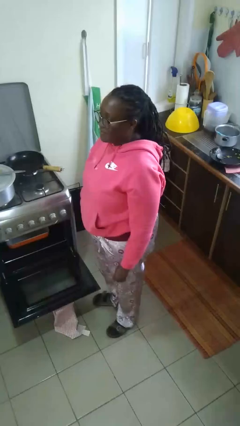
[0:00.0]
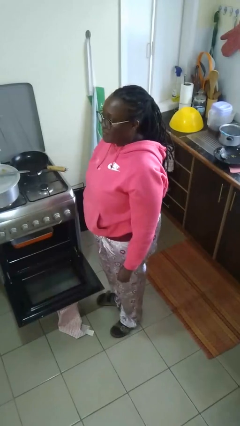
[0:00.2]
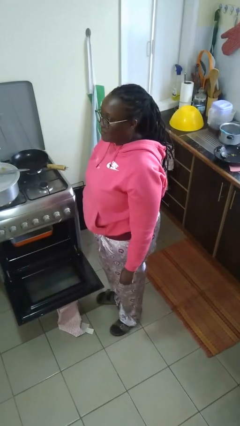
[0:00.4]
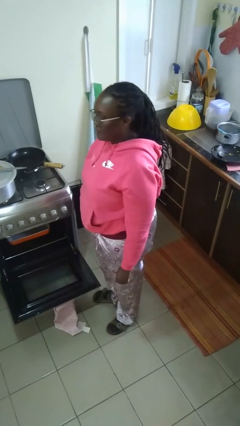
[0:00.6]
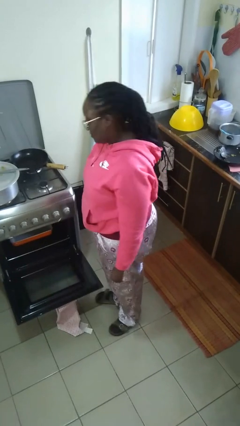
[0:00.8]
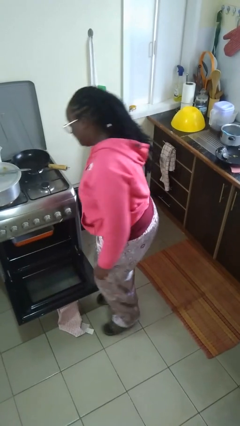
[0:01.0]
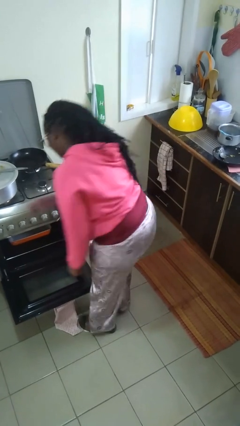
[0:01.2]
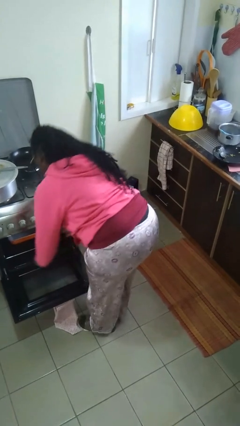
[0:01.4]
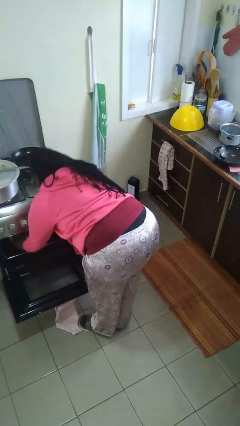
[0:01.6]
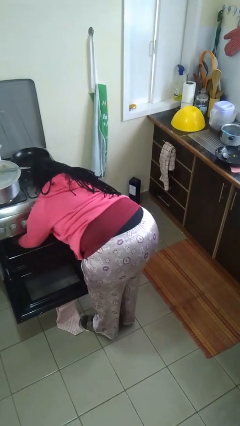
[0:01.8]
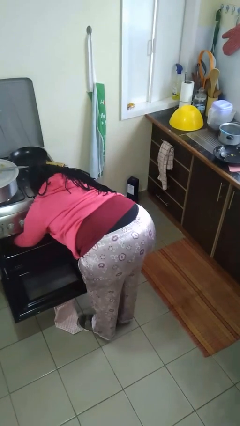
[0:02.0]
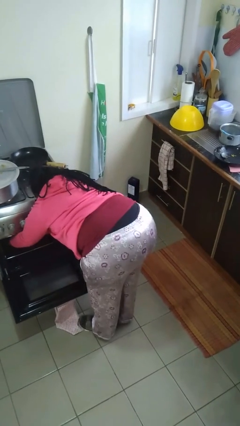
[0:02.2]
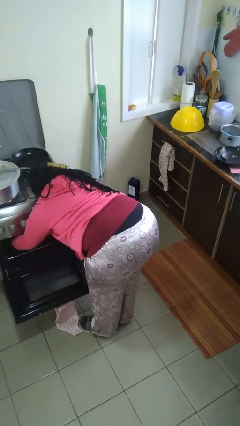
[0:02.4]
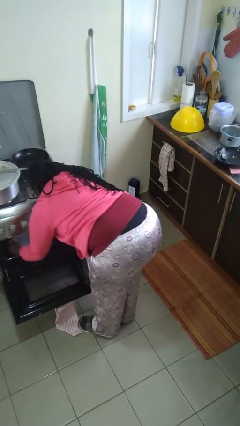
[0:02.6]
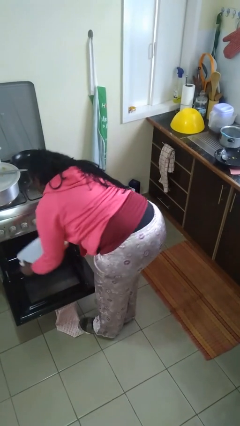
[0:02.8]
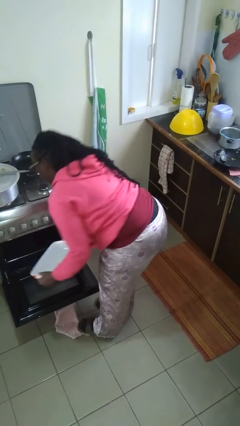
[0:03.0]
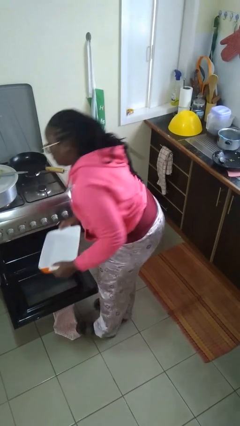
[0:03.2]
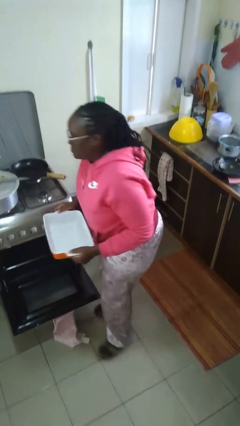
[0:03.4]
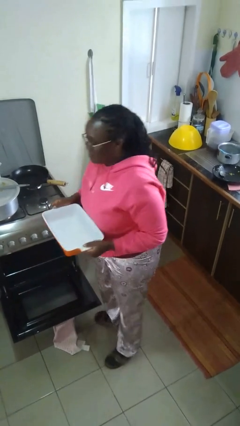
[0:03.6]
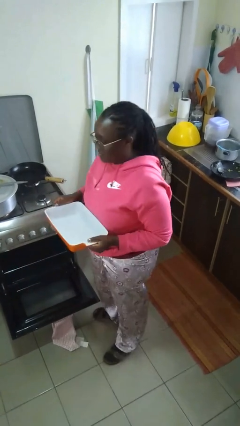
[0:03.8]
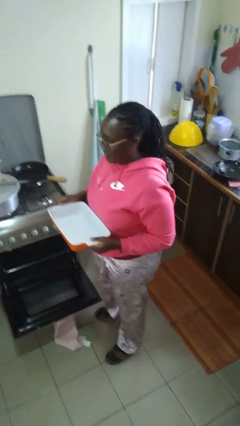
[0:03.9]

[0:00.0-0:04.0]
person takes object from oven

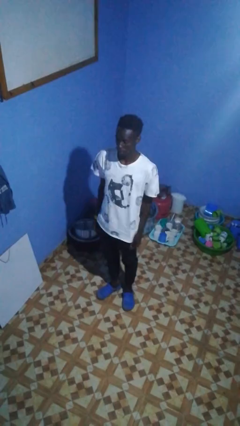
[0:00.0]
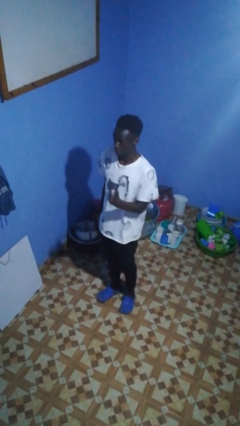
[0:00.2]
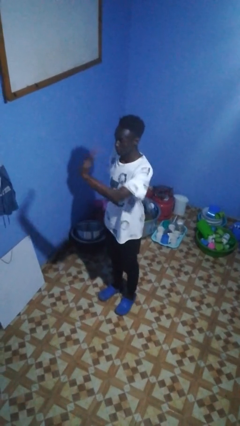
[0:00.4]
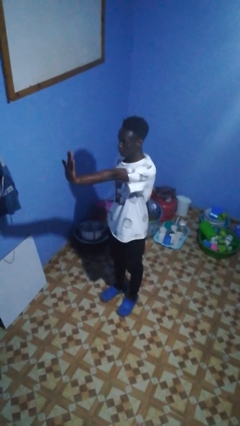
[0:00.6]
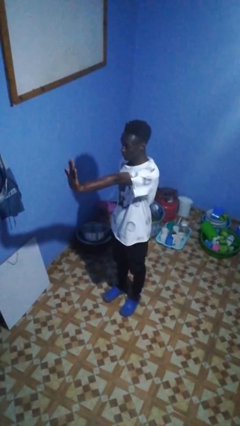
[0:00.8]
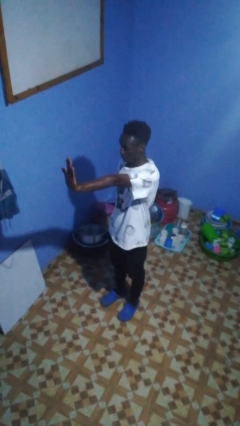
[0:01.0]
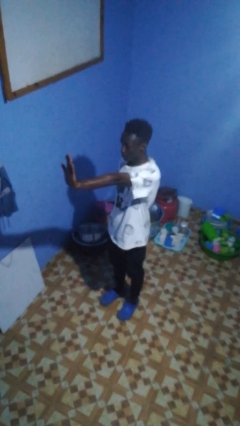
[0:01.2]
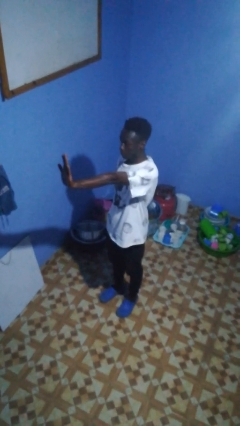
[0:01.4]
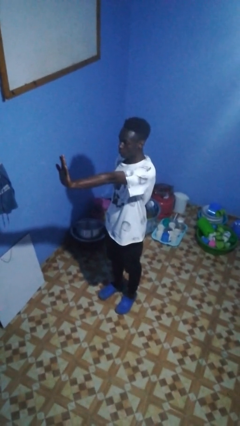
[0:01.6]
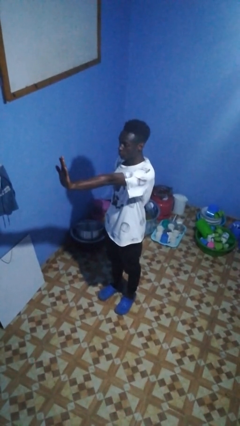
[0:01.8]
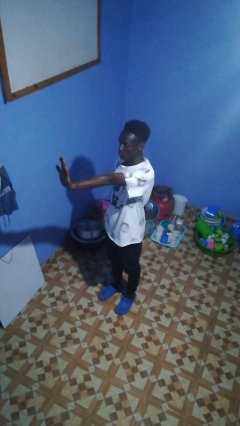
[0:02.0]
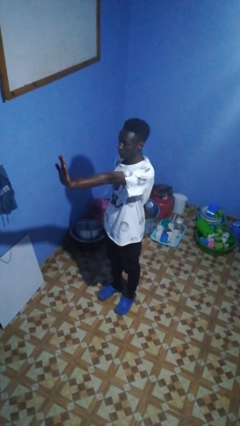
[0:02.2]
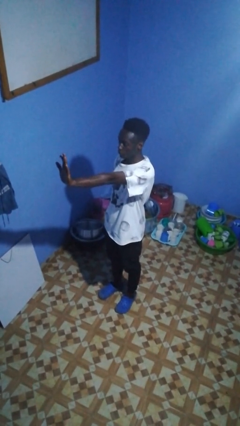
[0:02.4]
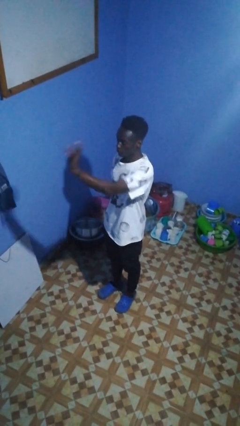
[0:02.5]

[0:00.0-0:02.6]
person gestures stop

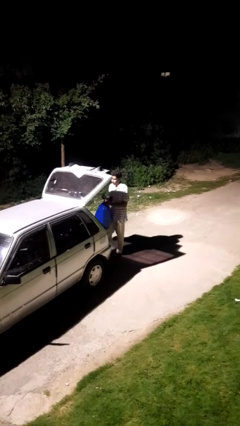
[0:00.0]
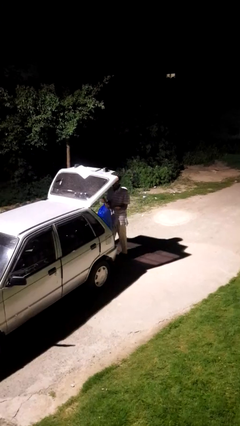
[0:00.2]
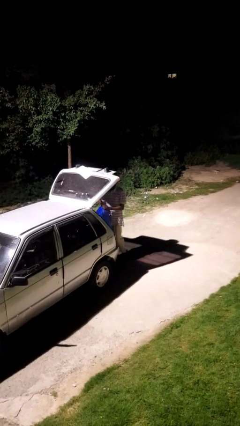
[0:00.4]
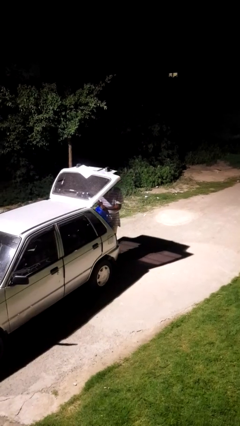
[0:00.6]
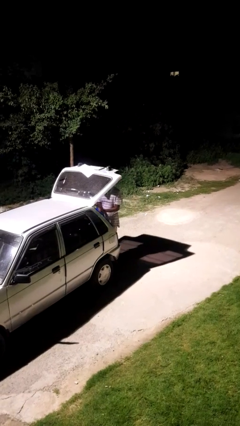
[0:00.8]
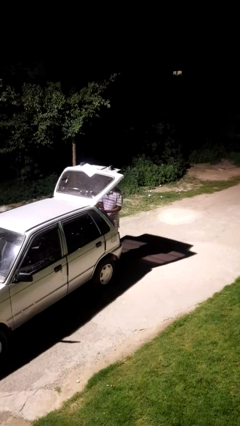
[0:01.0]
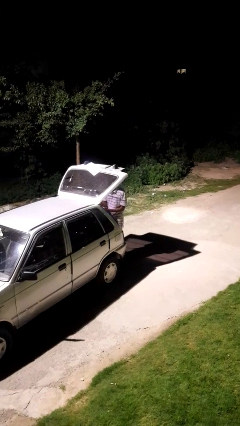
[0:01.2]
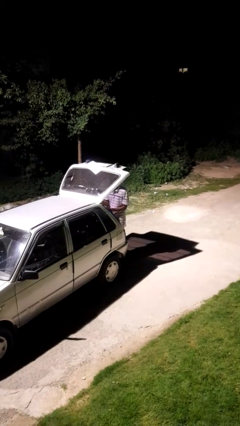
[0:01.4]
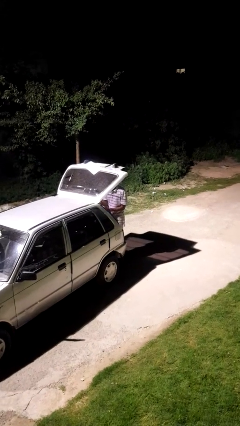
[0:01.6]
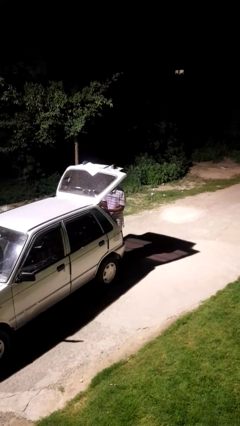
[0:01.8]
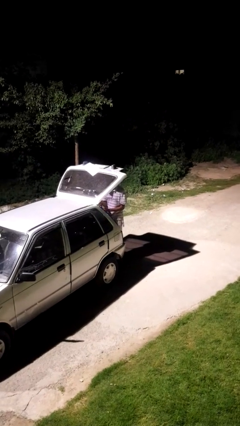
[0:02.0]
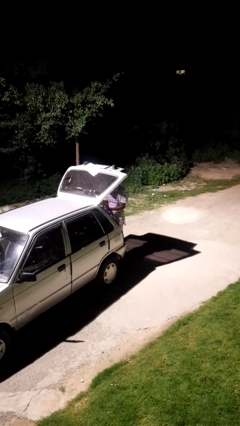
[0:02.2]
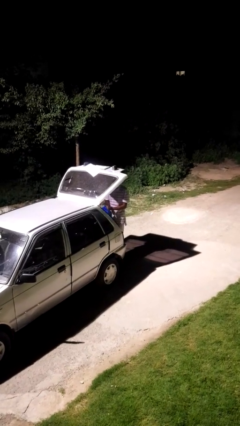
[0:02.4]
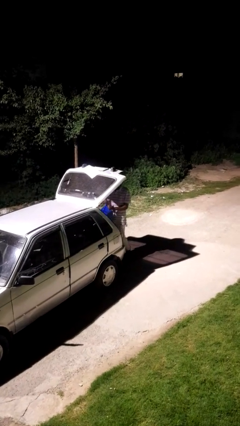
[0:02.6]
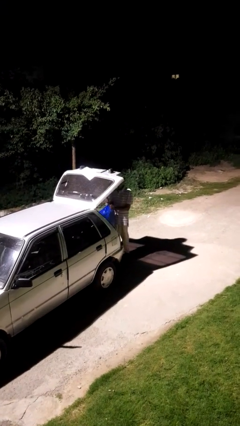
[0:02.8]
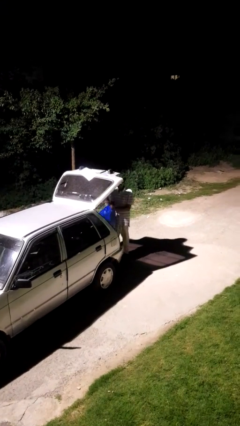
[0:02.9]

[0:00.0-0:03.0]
person loads car

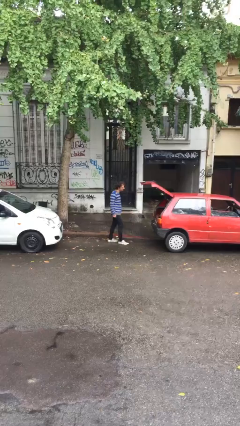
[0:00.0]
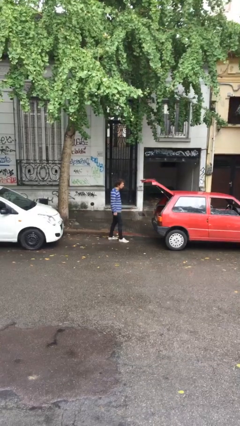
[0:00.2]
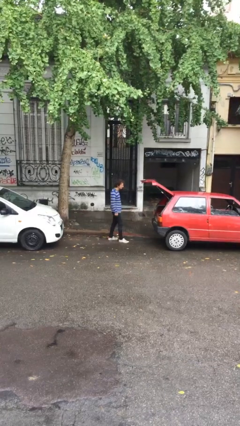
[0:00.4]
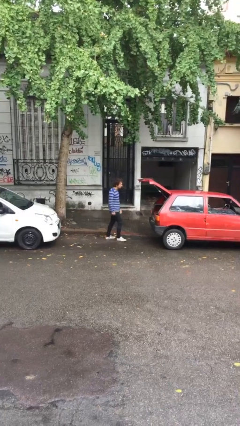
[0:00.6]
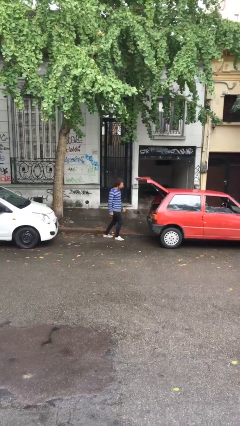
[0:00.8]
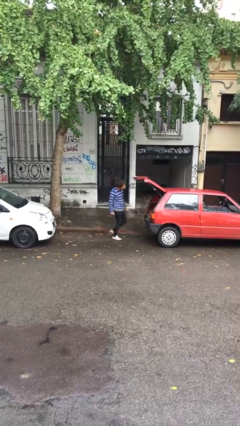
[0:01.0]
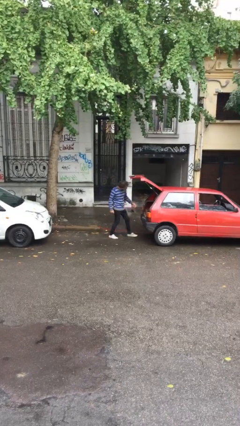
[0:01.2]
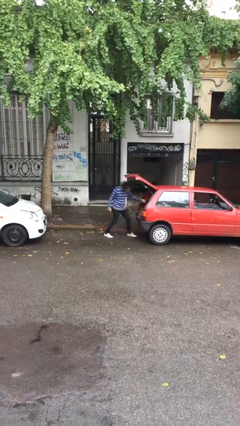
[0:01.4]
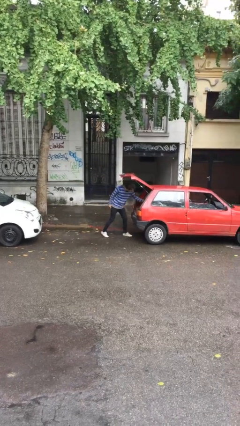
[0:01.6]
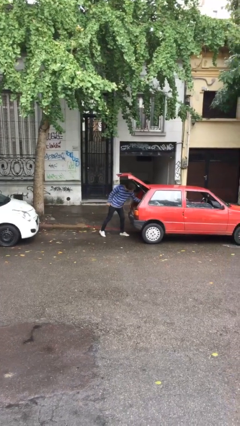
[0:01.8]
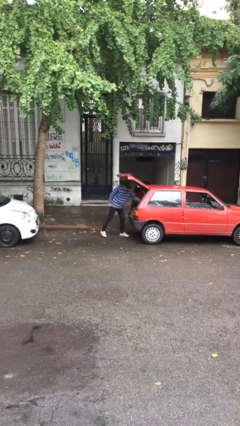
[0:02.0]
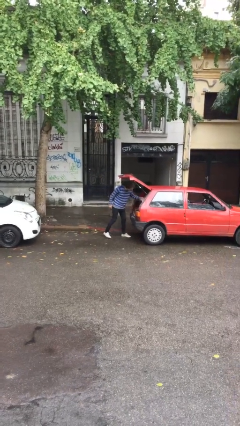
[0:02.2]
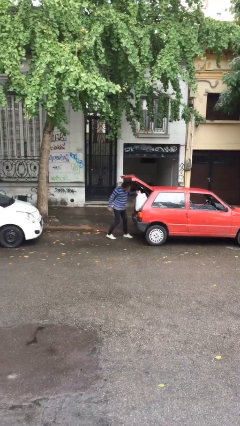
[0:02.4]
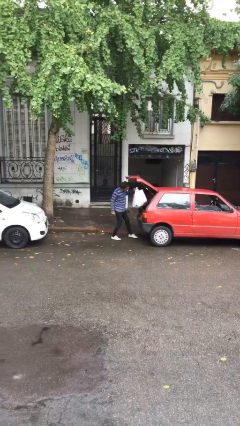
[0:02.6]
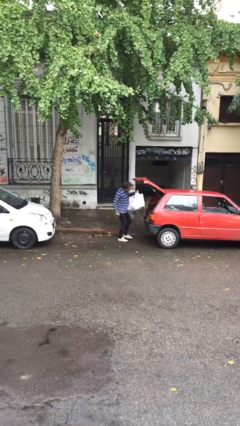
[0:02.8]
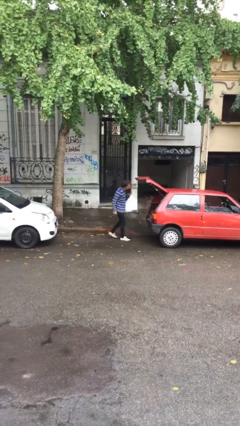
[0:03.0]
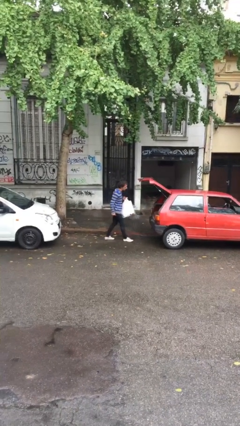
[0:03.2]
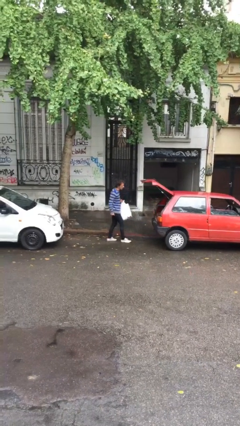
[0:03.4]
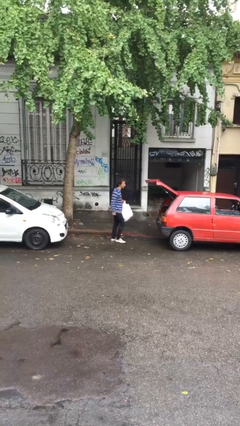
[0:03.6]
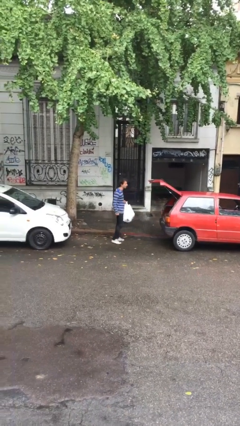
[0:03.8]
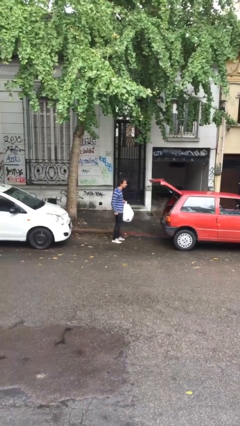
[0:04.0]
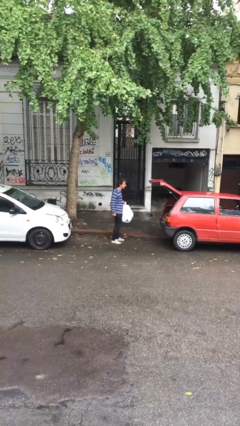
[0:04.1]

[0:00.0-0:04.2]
person unloads car

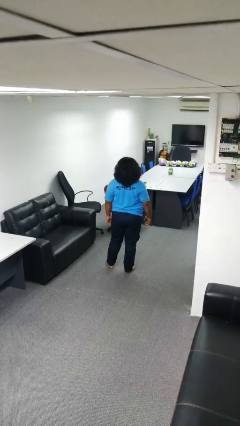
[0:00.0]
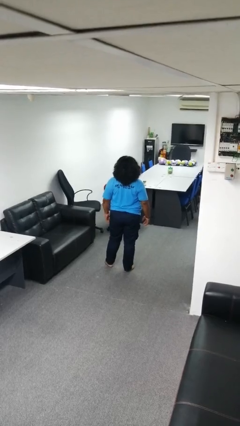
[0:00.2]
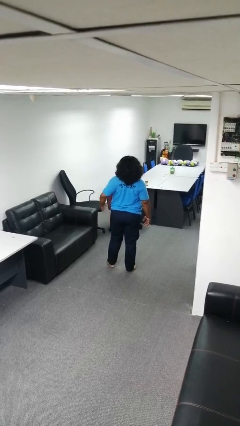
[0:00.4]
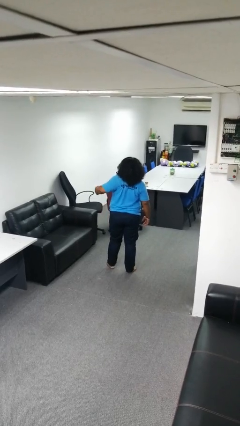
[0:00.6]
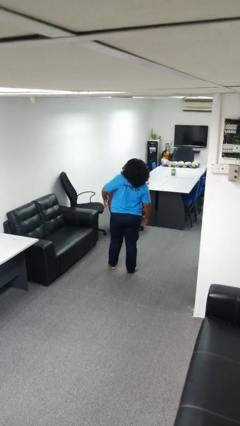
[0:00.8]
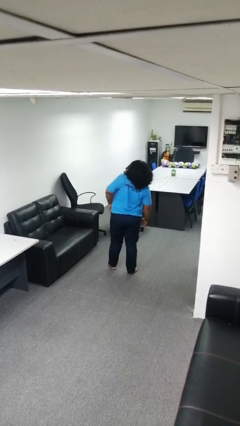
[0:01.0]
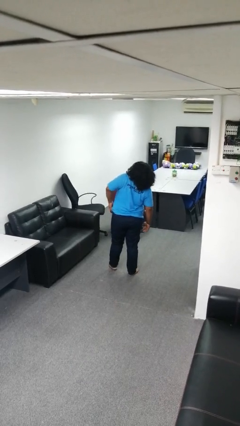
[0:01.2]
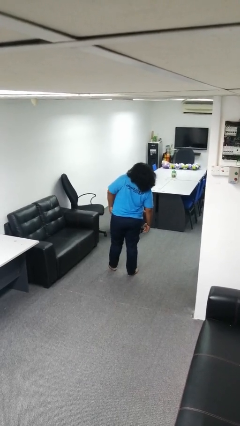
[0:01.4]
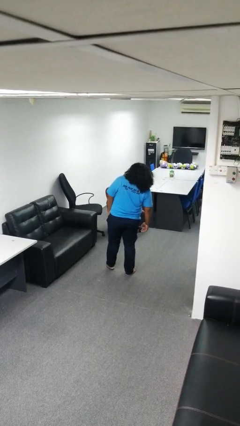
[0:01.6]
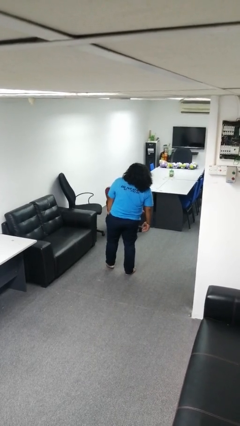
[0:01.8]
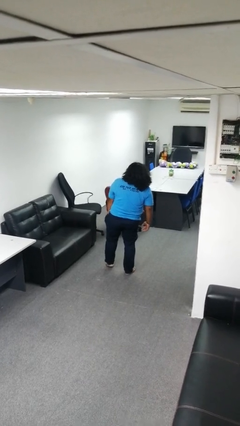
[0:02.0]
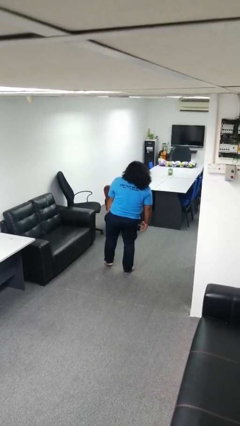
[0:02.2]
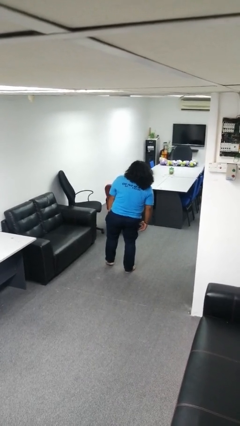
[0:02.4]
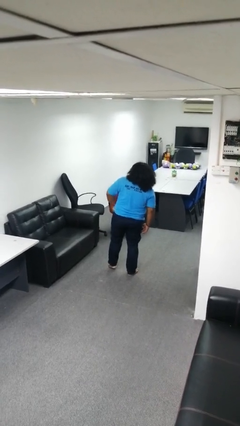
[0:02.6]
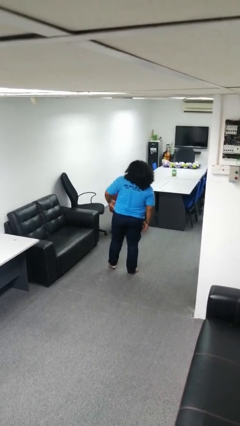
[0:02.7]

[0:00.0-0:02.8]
person puts hands in back pockets

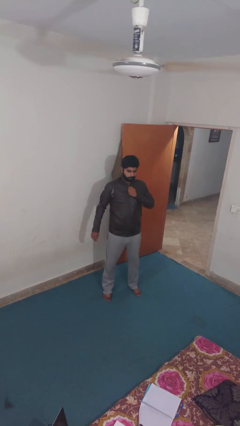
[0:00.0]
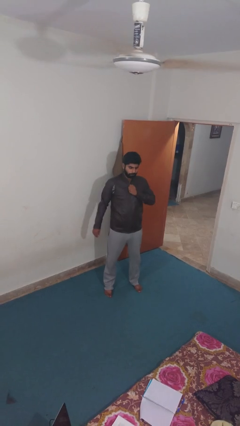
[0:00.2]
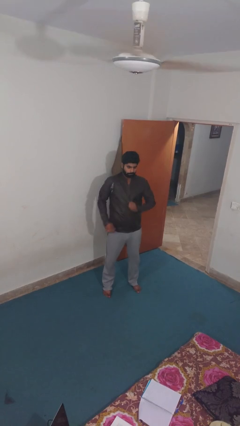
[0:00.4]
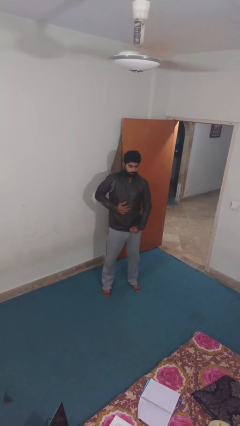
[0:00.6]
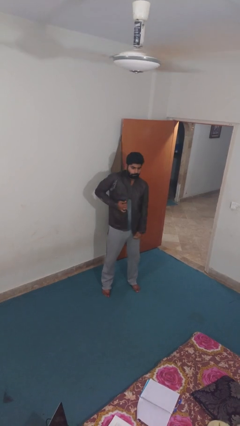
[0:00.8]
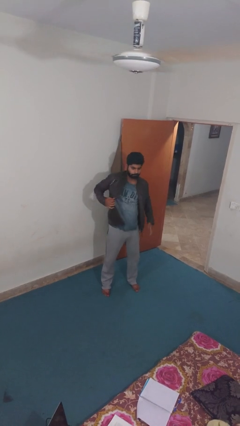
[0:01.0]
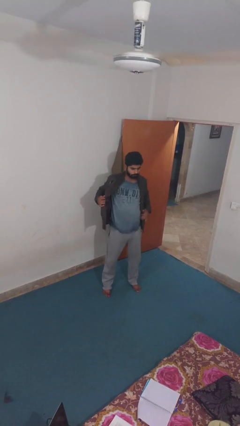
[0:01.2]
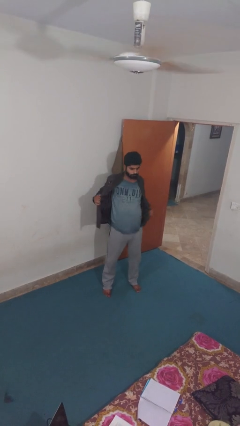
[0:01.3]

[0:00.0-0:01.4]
person unzips jacket
